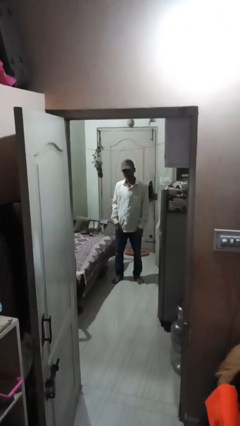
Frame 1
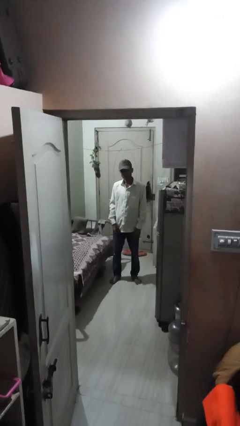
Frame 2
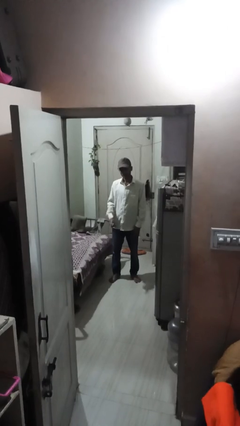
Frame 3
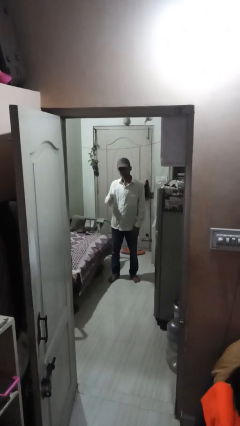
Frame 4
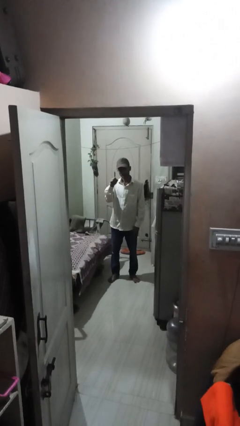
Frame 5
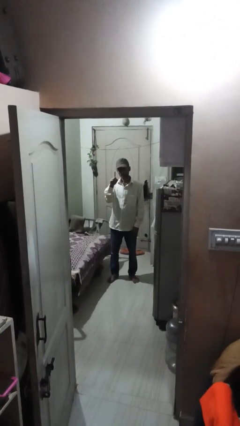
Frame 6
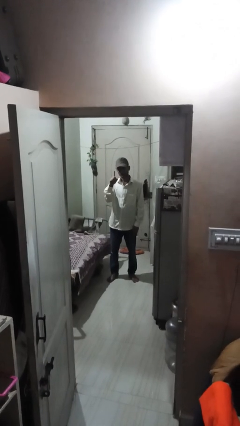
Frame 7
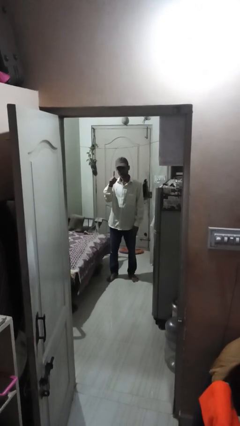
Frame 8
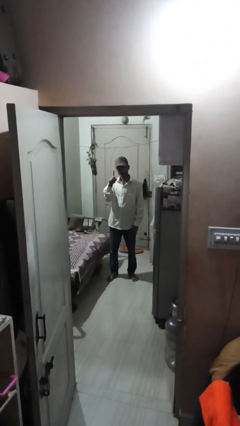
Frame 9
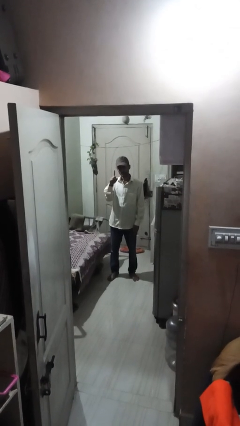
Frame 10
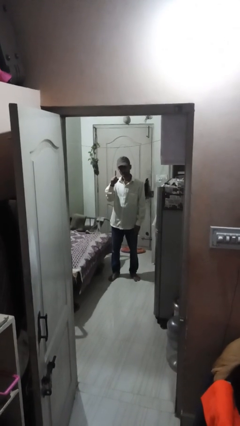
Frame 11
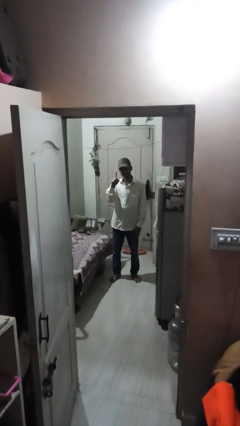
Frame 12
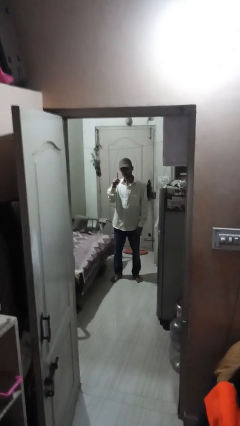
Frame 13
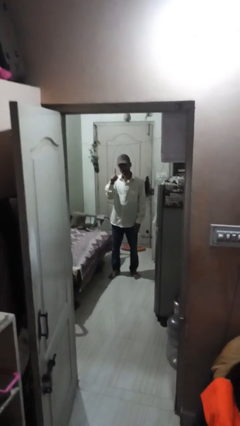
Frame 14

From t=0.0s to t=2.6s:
person gestures number one

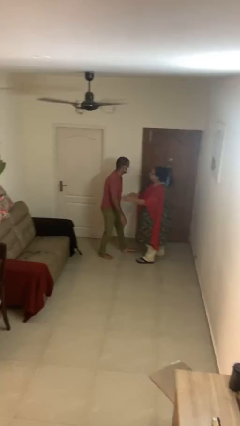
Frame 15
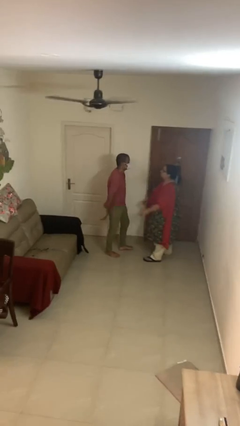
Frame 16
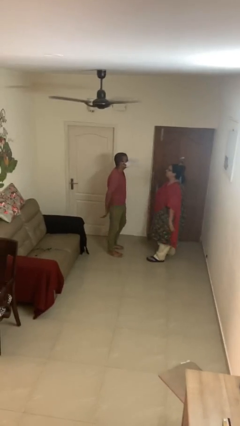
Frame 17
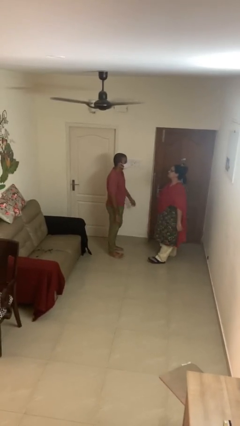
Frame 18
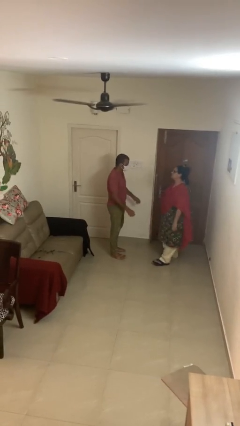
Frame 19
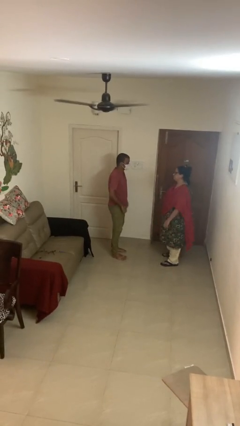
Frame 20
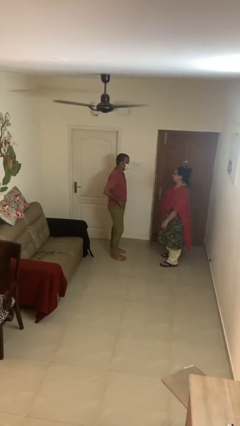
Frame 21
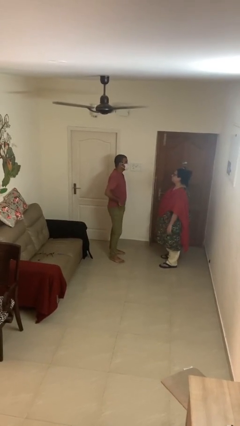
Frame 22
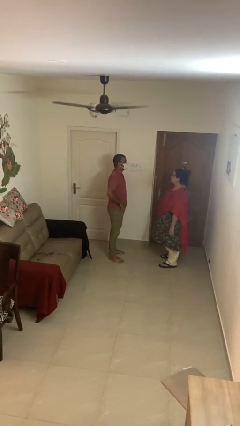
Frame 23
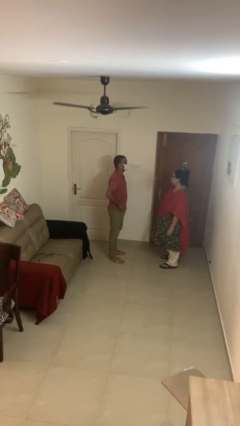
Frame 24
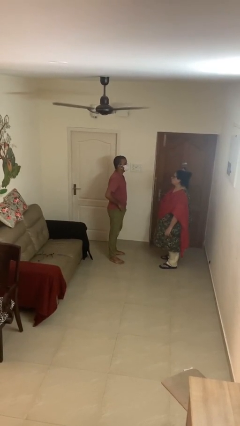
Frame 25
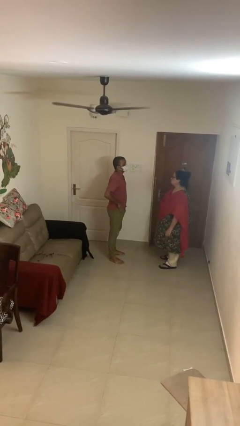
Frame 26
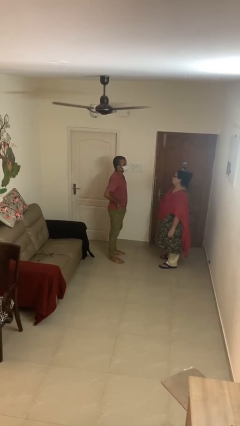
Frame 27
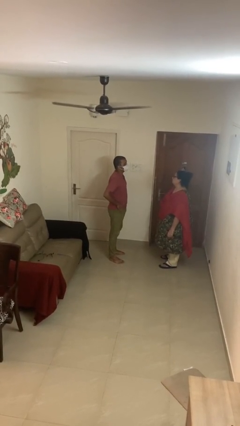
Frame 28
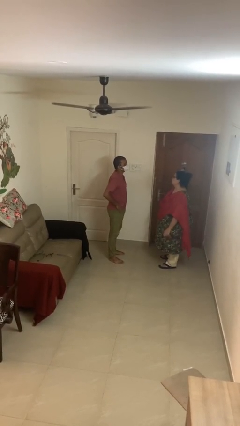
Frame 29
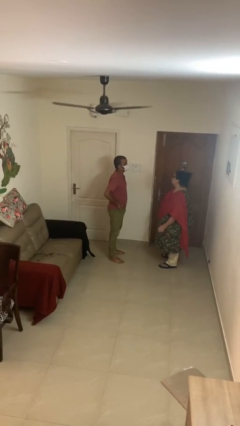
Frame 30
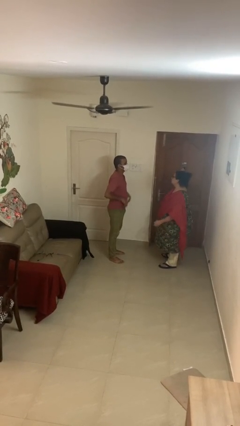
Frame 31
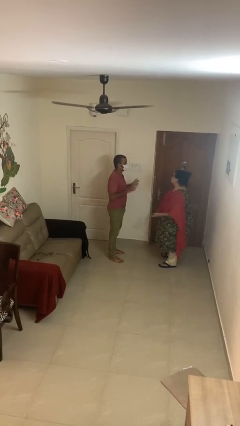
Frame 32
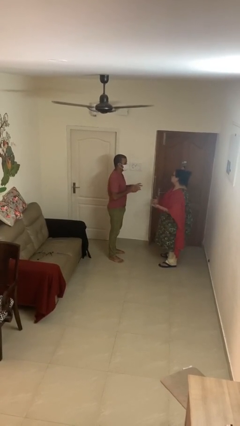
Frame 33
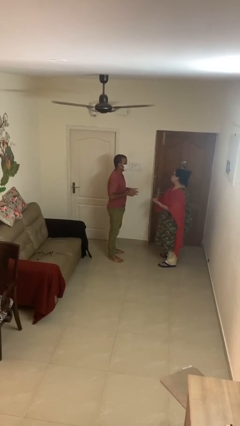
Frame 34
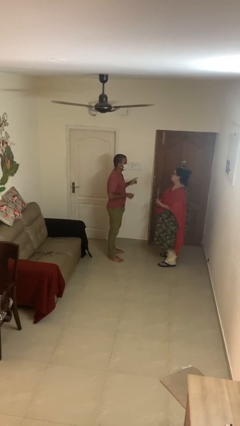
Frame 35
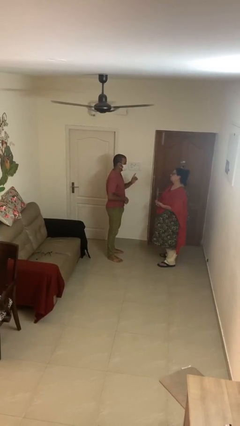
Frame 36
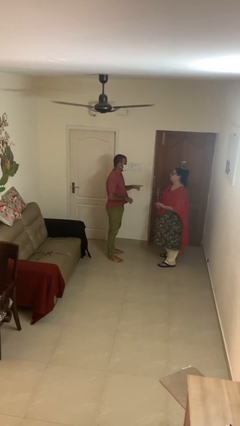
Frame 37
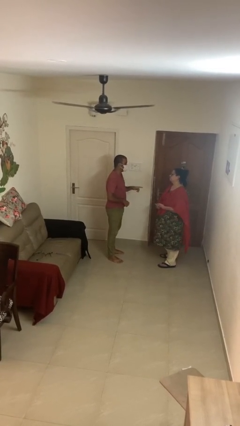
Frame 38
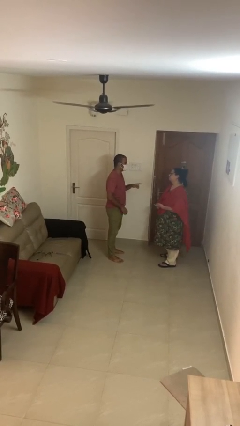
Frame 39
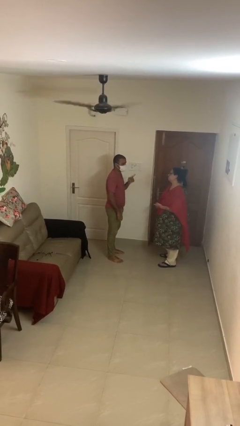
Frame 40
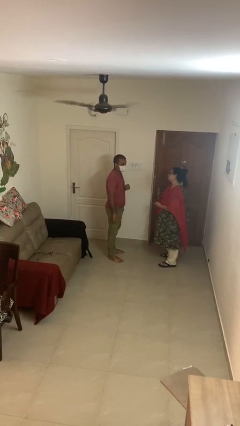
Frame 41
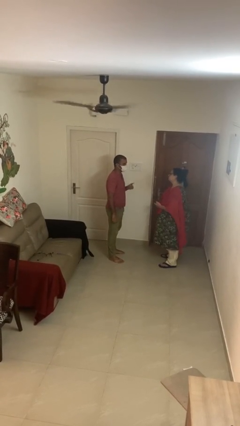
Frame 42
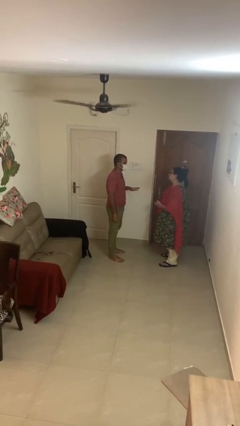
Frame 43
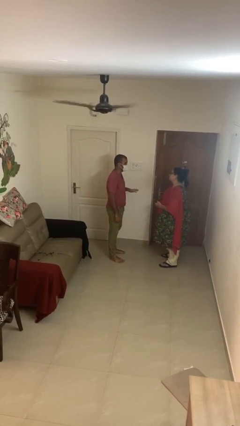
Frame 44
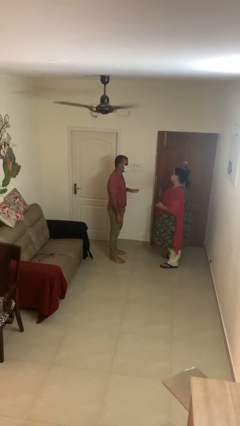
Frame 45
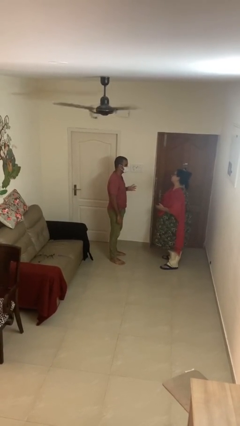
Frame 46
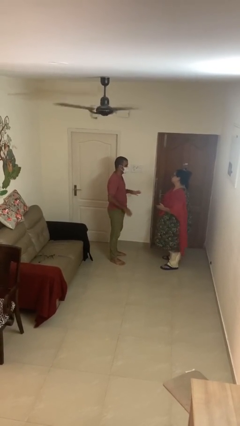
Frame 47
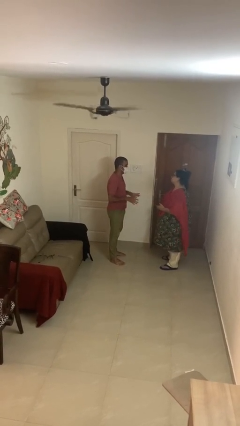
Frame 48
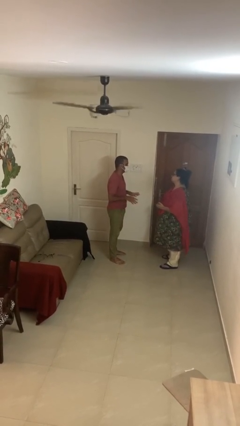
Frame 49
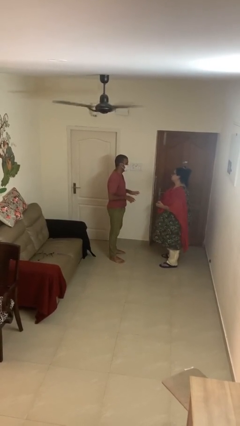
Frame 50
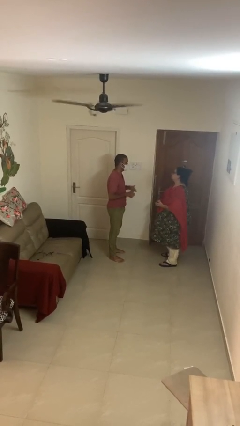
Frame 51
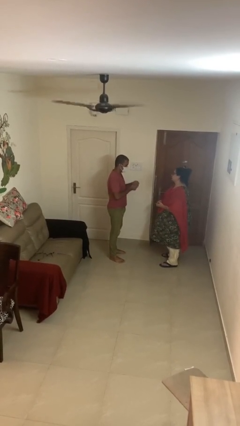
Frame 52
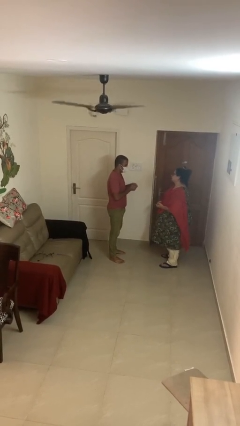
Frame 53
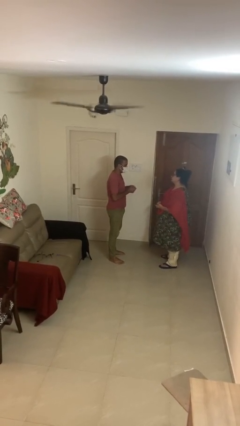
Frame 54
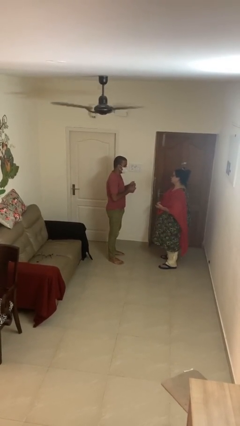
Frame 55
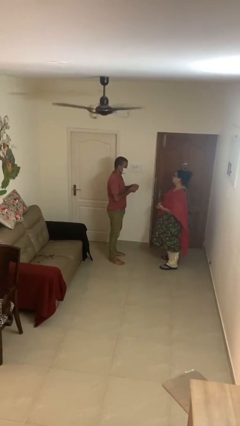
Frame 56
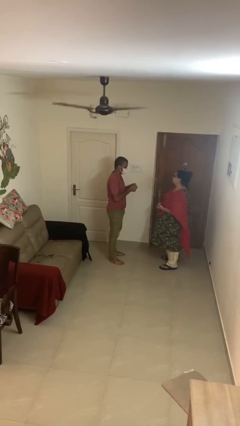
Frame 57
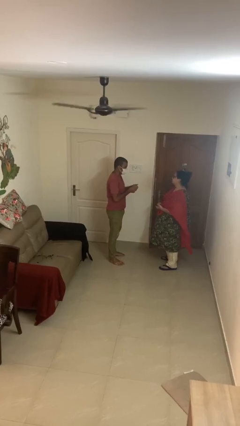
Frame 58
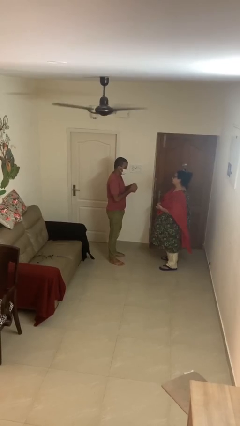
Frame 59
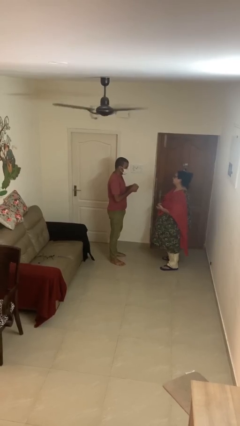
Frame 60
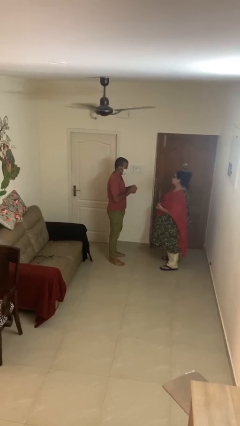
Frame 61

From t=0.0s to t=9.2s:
person talks to person

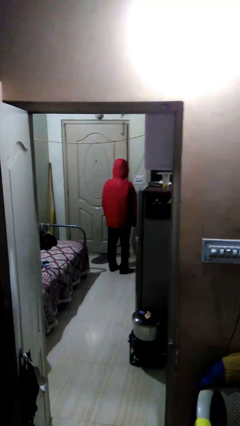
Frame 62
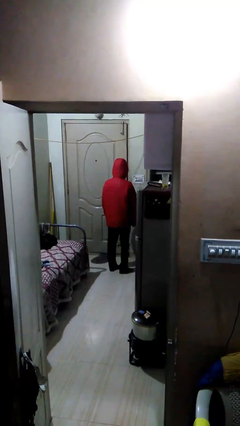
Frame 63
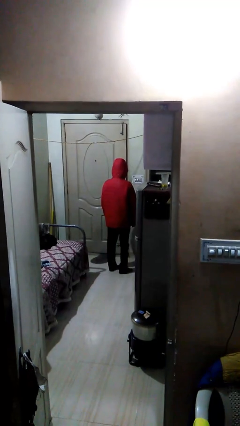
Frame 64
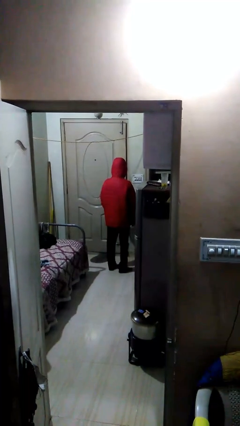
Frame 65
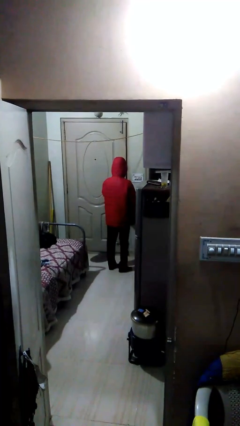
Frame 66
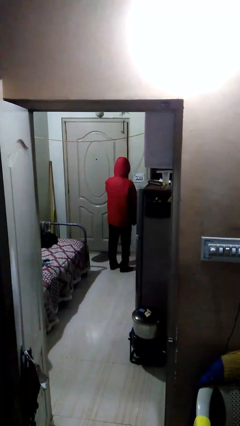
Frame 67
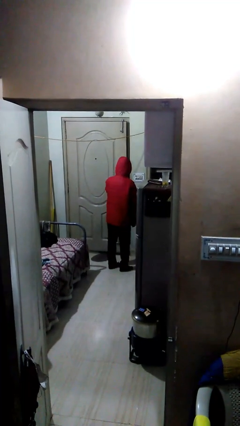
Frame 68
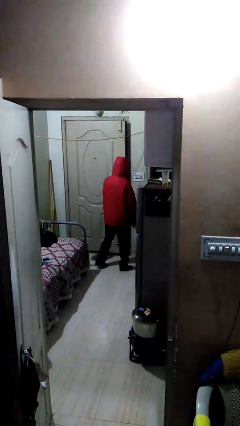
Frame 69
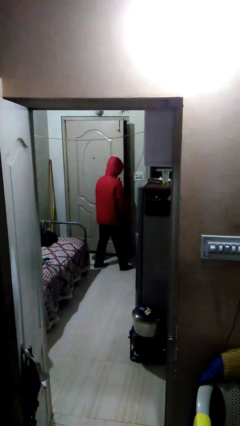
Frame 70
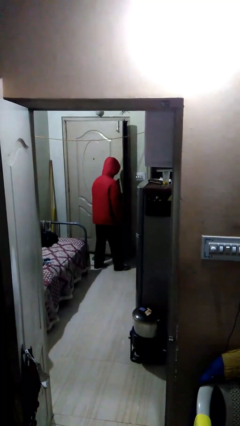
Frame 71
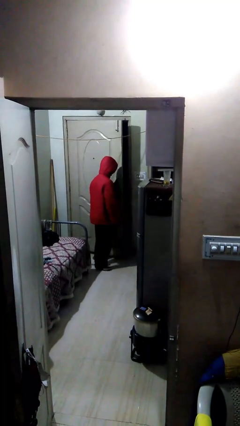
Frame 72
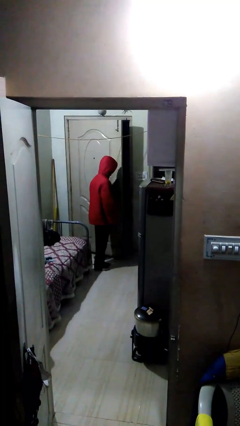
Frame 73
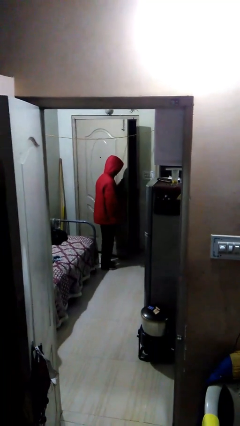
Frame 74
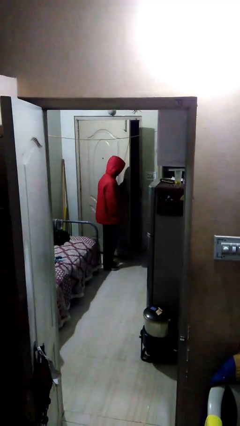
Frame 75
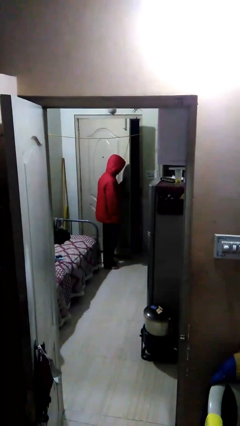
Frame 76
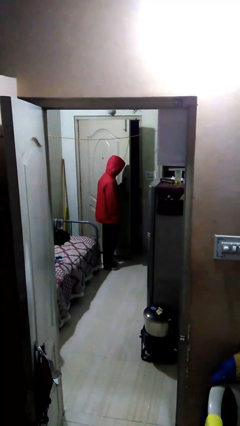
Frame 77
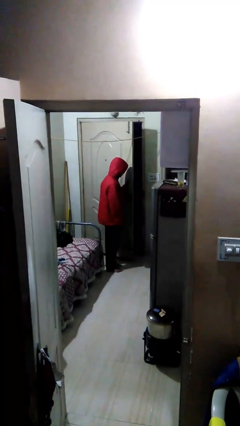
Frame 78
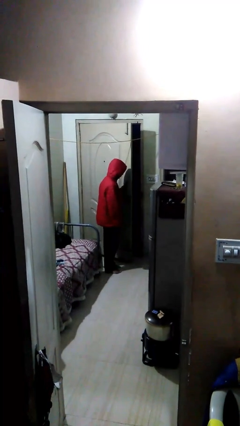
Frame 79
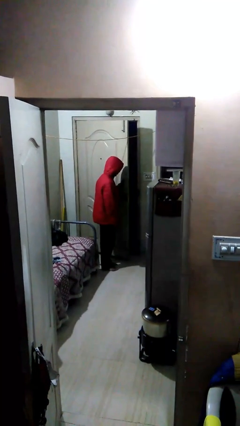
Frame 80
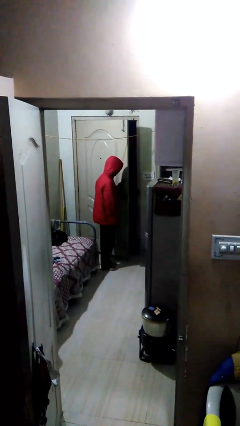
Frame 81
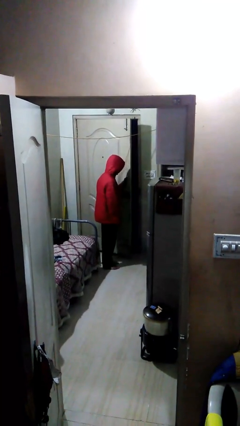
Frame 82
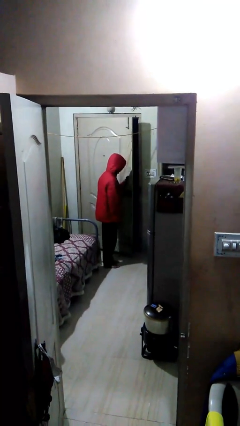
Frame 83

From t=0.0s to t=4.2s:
person opens facility door

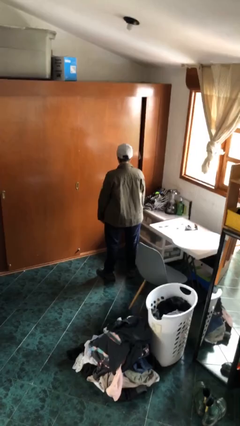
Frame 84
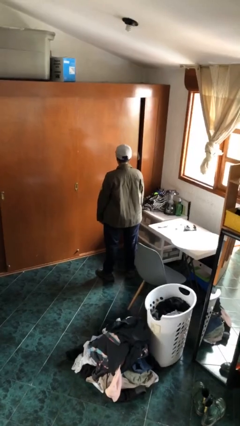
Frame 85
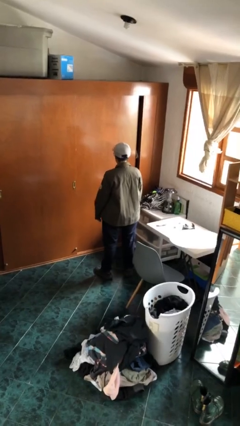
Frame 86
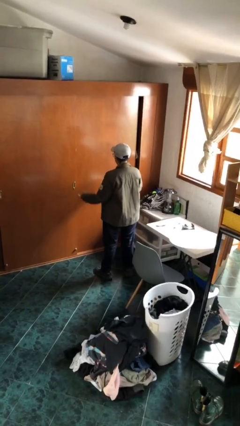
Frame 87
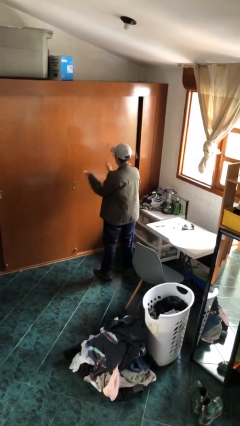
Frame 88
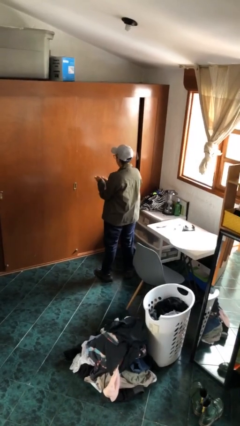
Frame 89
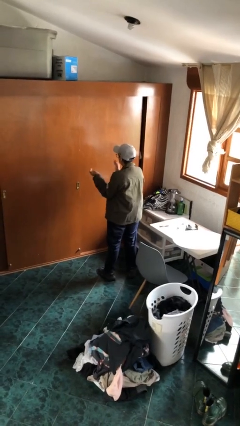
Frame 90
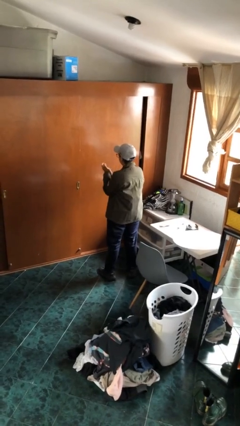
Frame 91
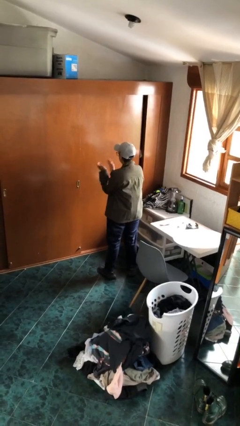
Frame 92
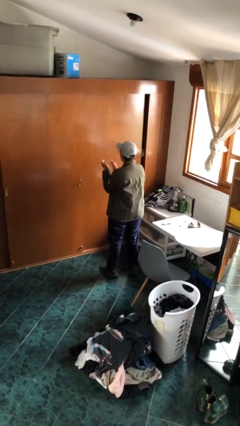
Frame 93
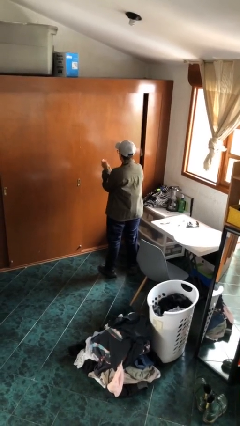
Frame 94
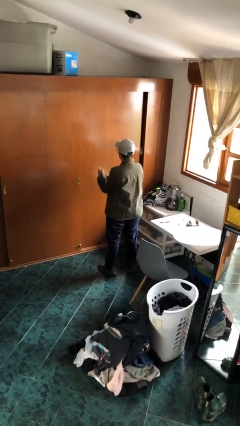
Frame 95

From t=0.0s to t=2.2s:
person claps hands
